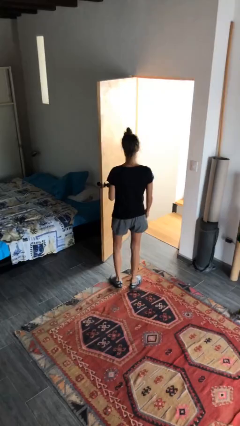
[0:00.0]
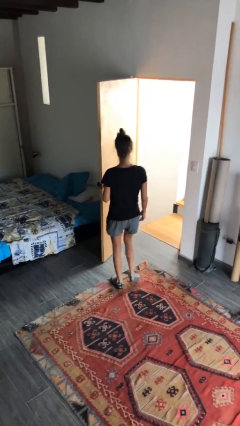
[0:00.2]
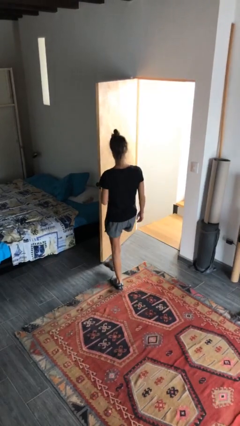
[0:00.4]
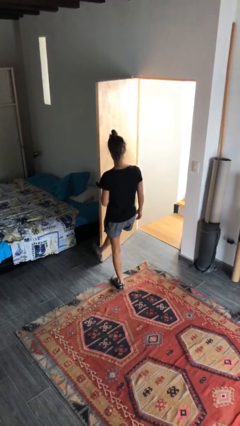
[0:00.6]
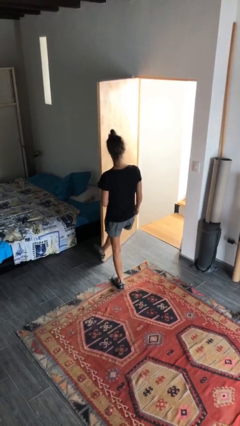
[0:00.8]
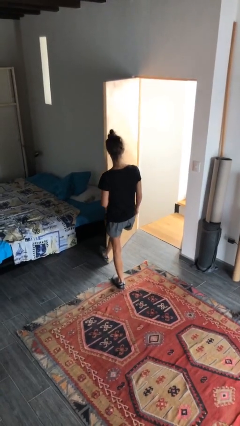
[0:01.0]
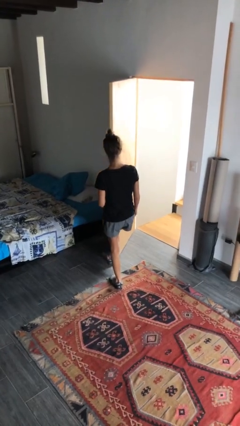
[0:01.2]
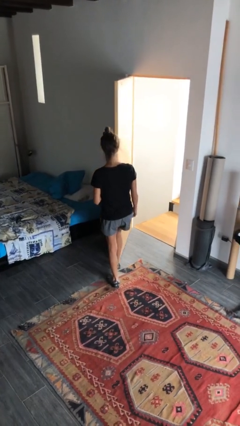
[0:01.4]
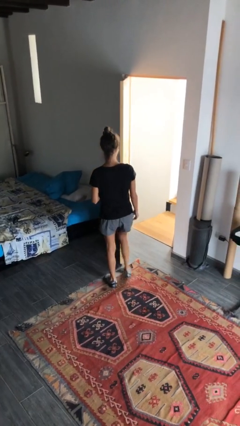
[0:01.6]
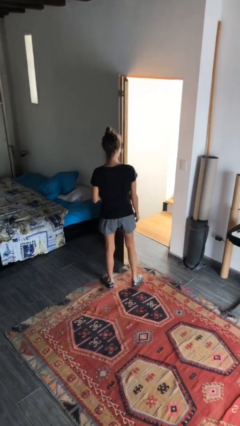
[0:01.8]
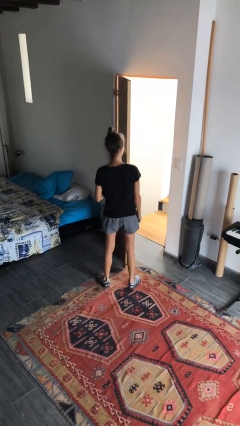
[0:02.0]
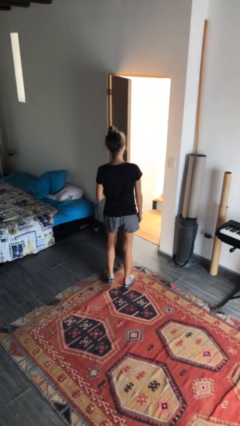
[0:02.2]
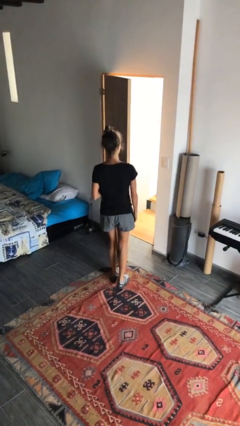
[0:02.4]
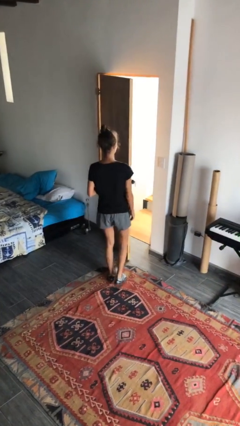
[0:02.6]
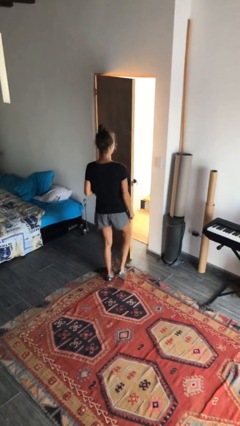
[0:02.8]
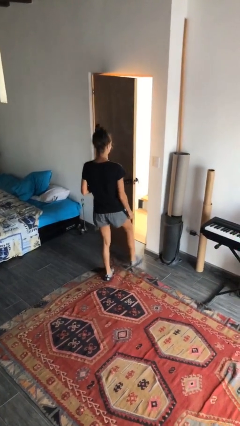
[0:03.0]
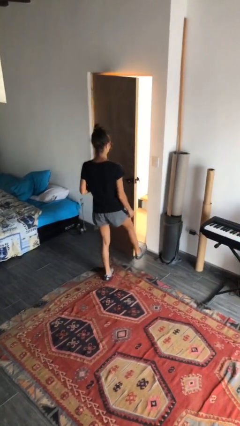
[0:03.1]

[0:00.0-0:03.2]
person closes door with foot

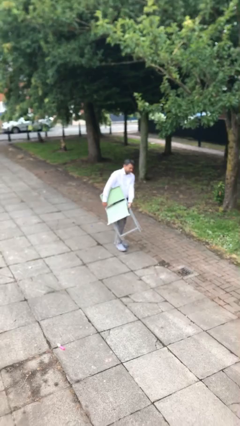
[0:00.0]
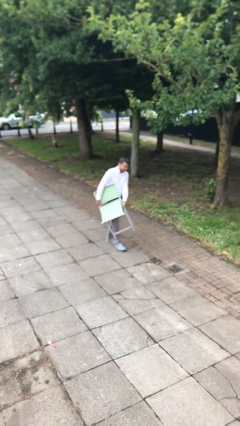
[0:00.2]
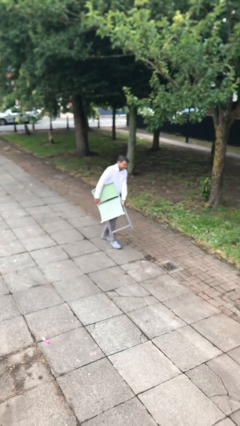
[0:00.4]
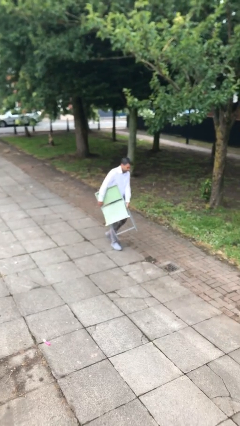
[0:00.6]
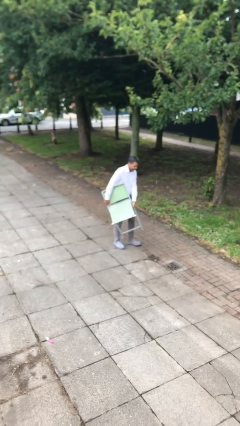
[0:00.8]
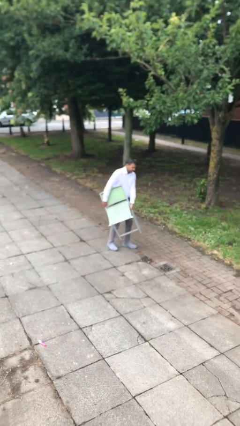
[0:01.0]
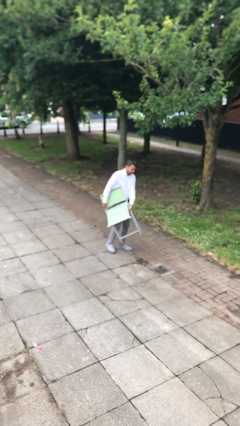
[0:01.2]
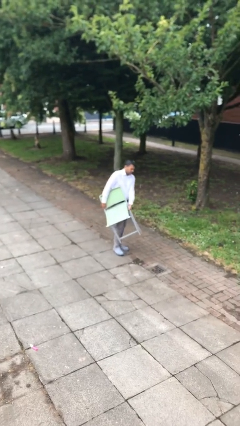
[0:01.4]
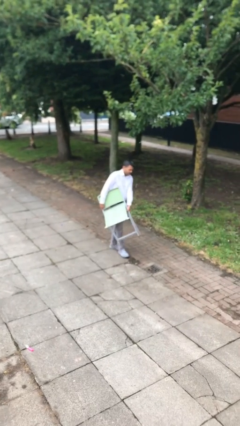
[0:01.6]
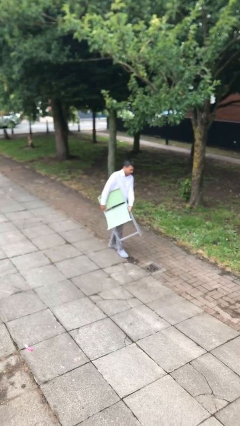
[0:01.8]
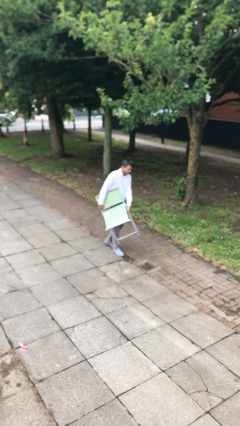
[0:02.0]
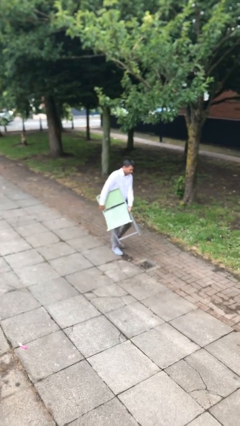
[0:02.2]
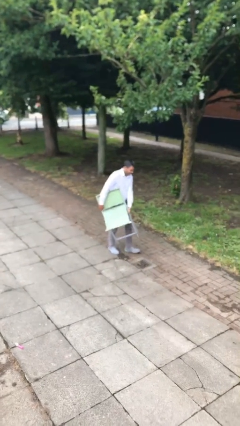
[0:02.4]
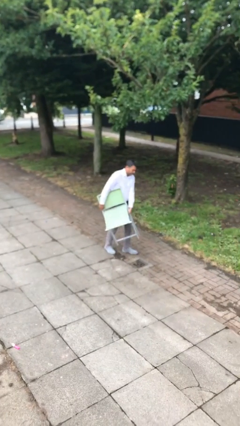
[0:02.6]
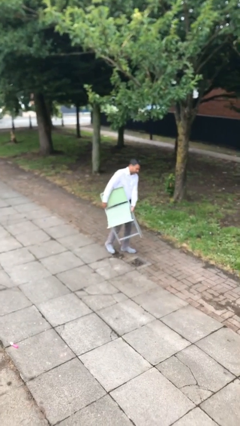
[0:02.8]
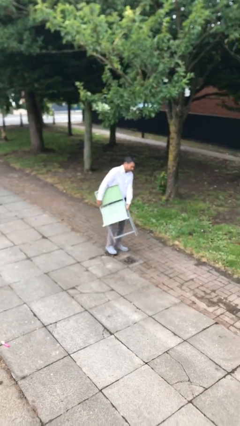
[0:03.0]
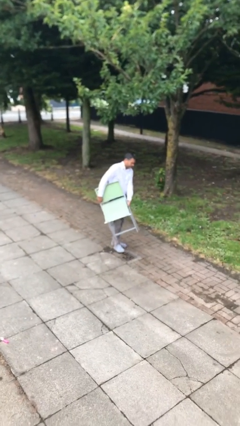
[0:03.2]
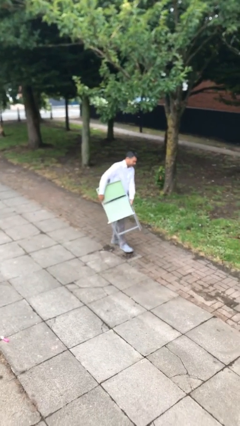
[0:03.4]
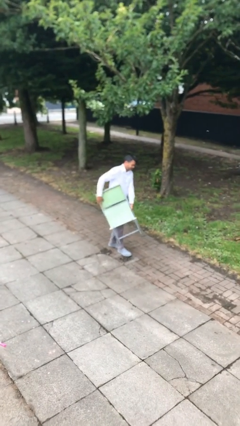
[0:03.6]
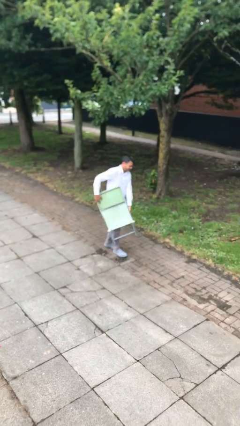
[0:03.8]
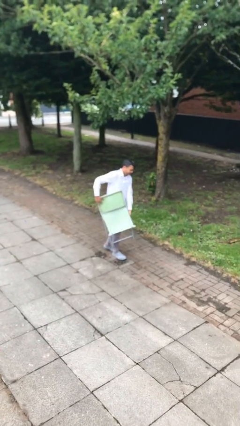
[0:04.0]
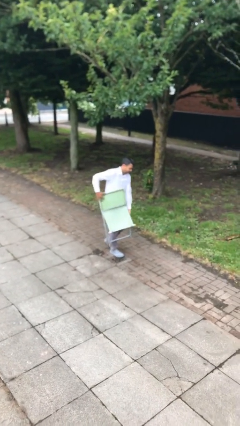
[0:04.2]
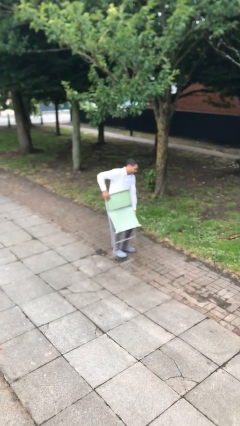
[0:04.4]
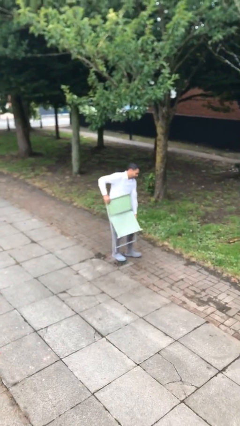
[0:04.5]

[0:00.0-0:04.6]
person carries heavy object

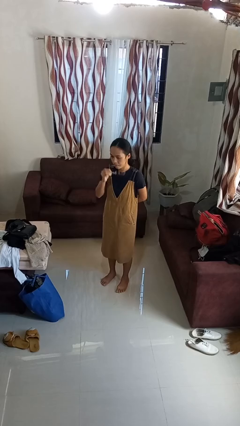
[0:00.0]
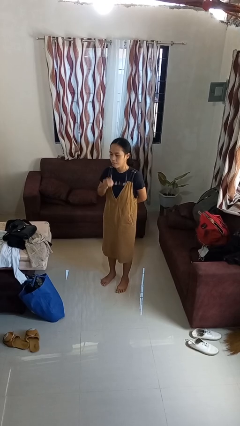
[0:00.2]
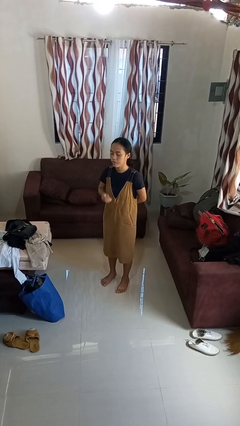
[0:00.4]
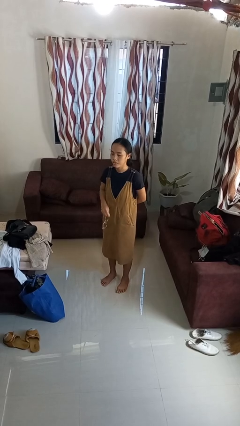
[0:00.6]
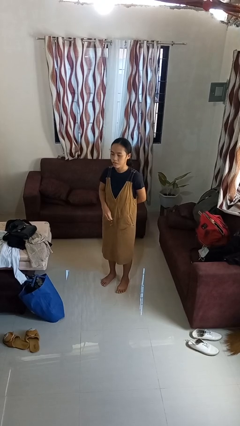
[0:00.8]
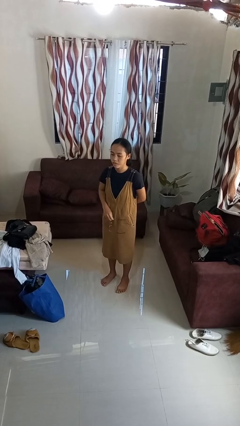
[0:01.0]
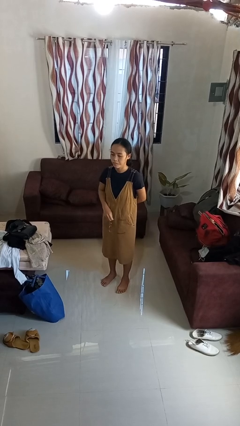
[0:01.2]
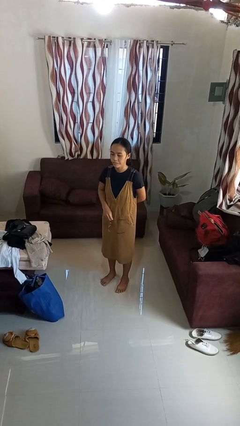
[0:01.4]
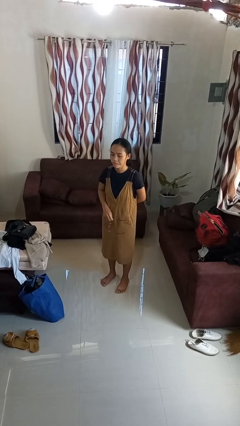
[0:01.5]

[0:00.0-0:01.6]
person takes off glasses

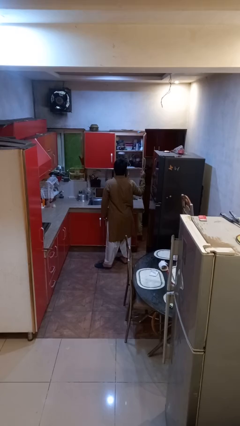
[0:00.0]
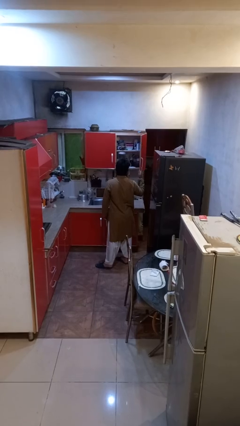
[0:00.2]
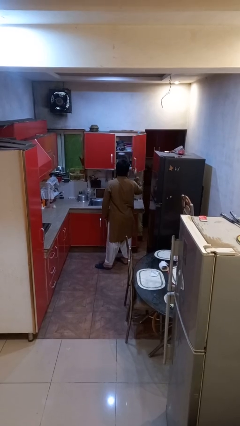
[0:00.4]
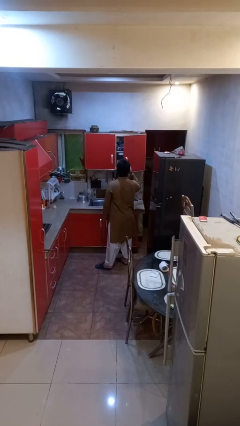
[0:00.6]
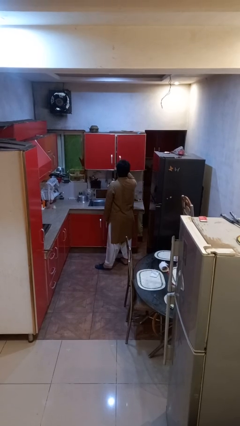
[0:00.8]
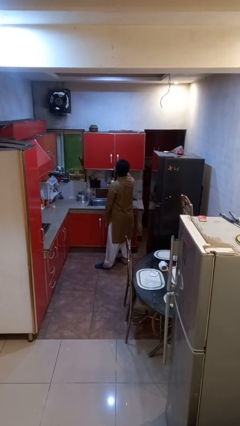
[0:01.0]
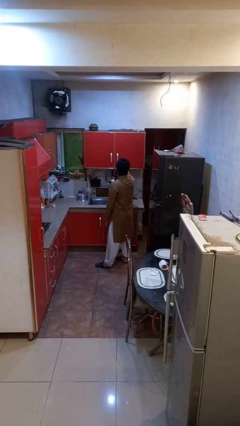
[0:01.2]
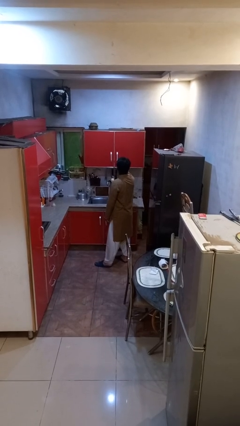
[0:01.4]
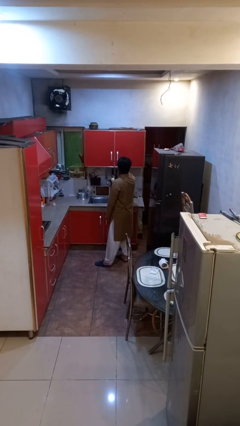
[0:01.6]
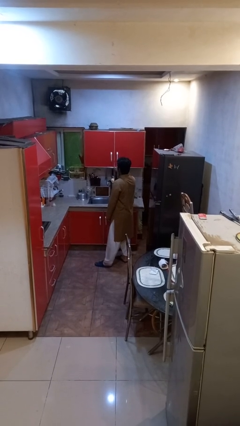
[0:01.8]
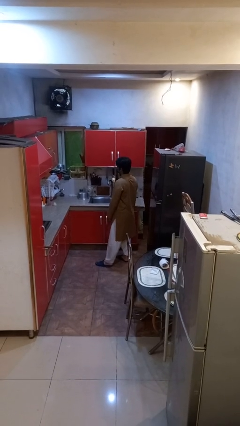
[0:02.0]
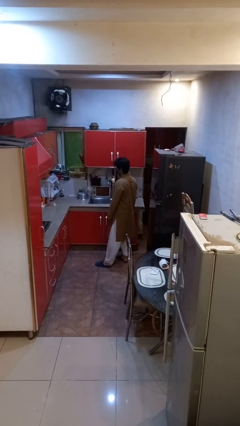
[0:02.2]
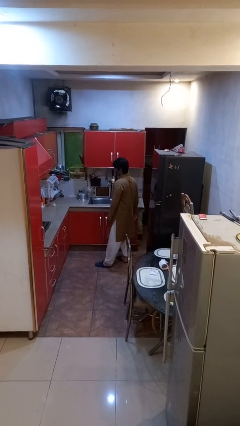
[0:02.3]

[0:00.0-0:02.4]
person closes cabinet

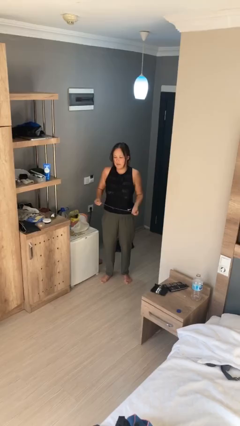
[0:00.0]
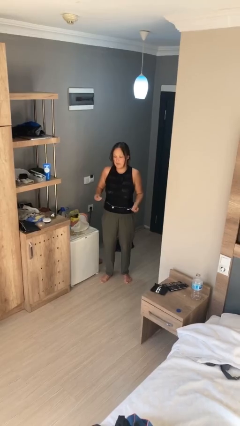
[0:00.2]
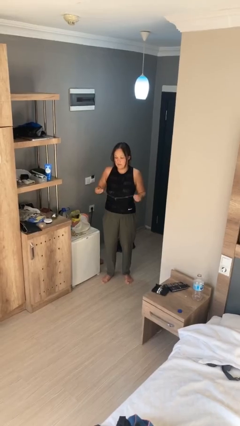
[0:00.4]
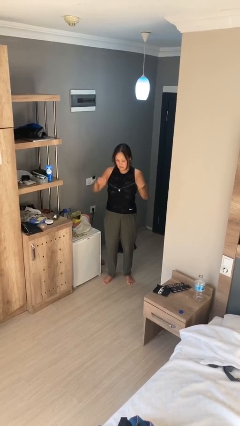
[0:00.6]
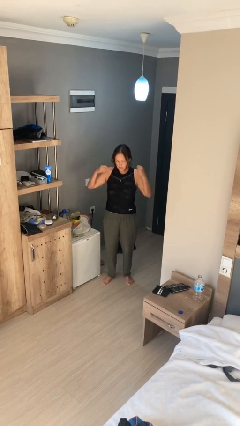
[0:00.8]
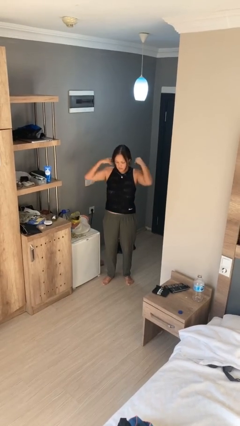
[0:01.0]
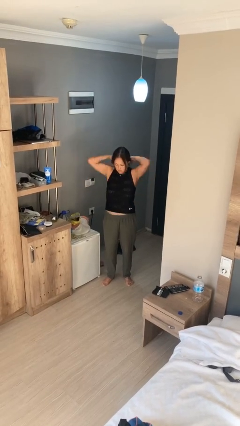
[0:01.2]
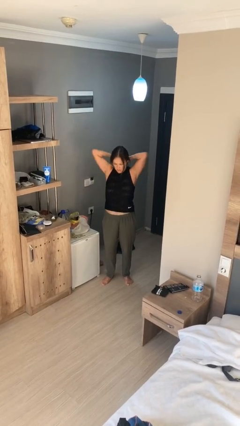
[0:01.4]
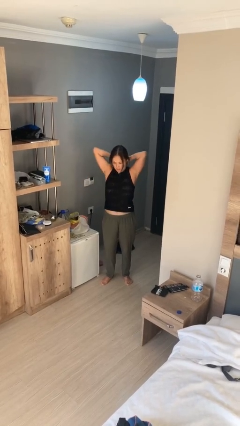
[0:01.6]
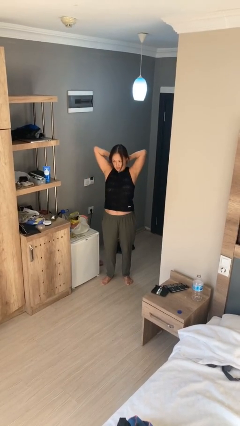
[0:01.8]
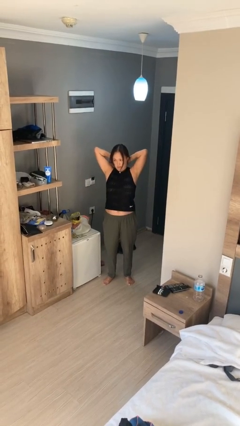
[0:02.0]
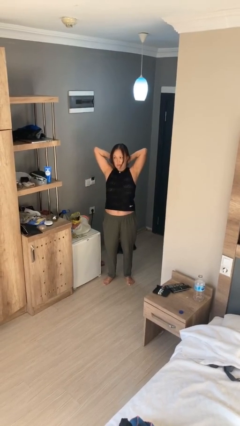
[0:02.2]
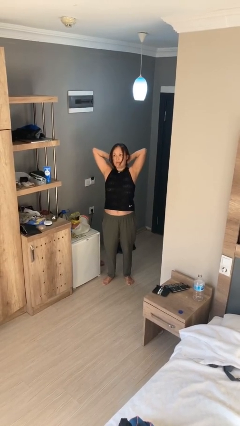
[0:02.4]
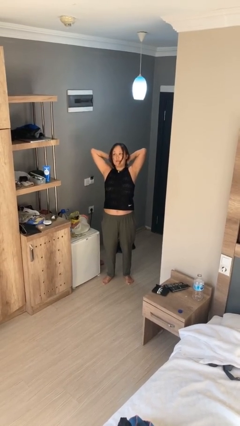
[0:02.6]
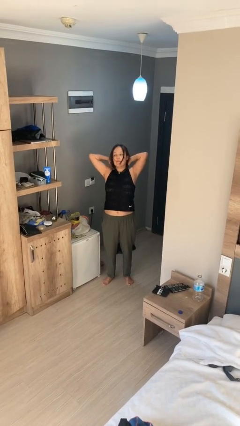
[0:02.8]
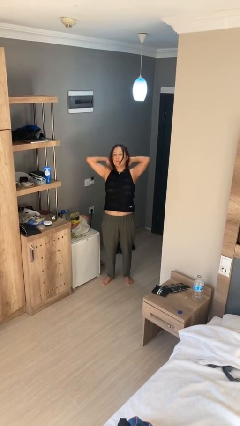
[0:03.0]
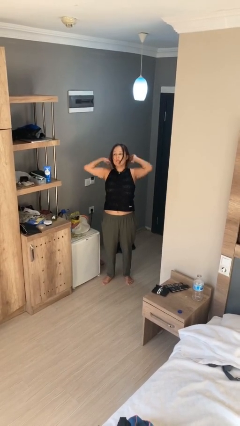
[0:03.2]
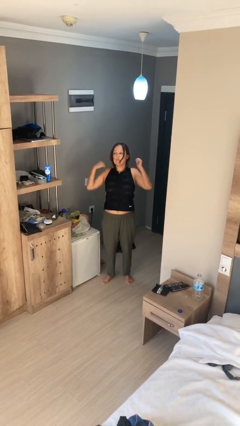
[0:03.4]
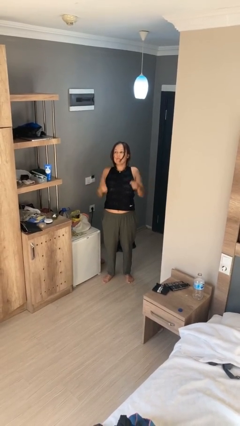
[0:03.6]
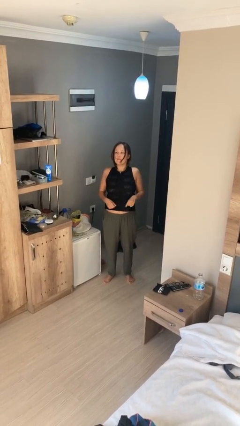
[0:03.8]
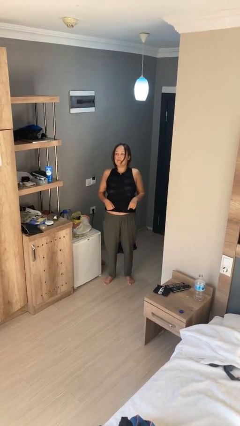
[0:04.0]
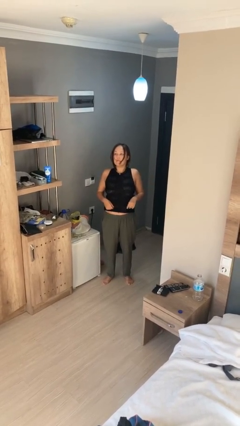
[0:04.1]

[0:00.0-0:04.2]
person puts on necklace

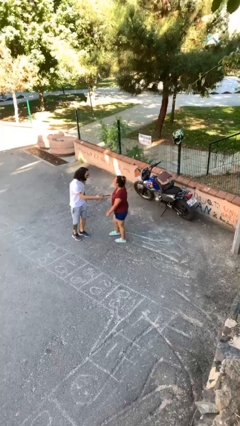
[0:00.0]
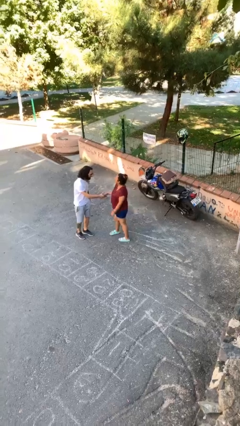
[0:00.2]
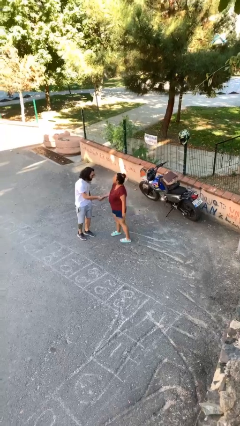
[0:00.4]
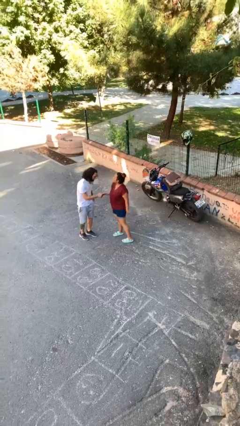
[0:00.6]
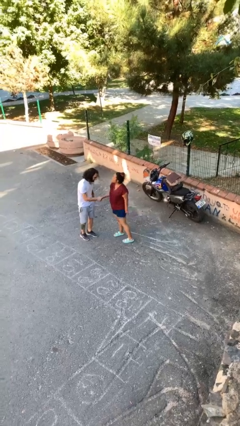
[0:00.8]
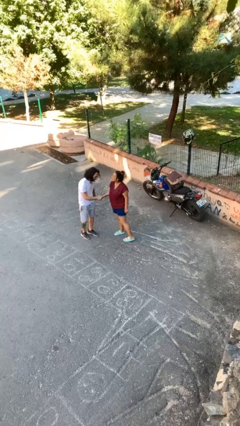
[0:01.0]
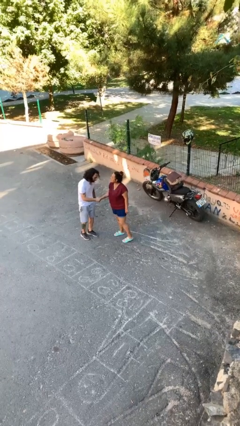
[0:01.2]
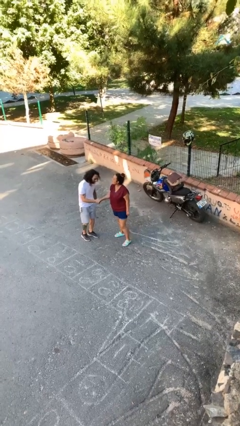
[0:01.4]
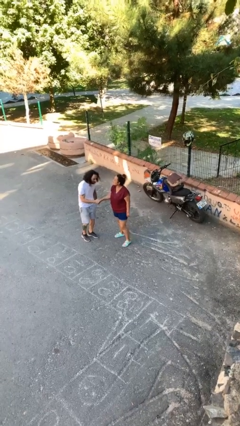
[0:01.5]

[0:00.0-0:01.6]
person shakes hand
